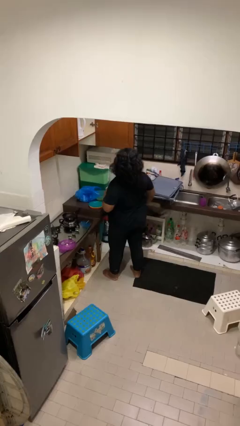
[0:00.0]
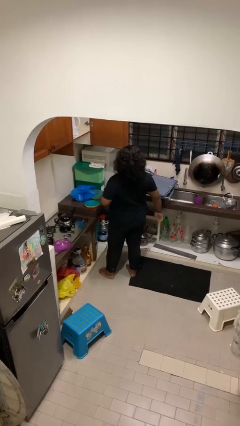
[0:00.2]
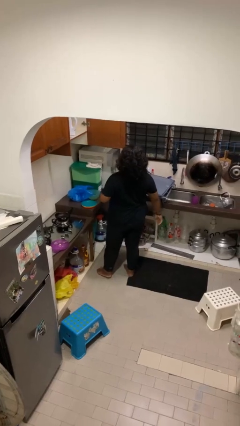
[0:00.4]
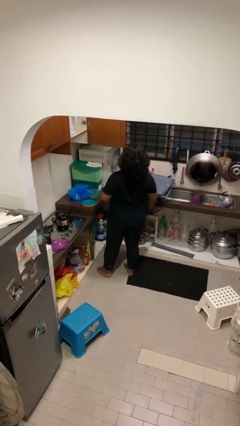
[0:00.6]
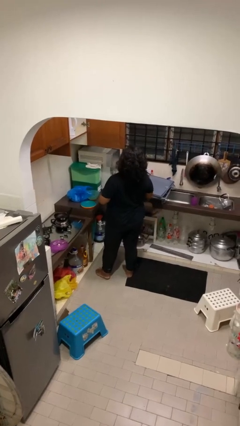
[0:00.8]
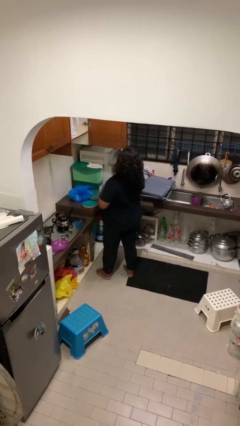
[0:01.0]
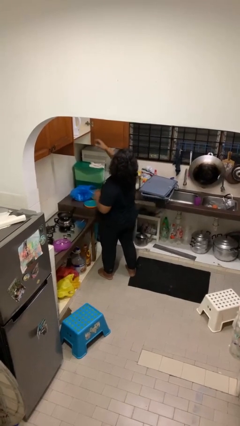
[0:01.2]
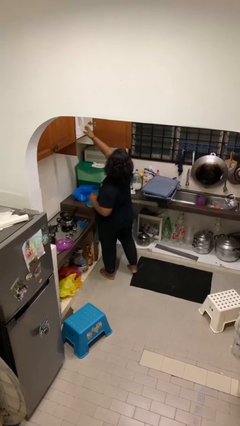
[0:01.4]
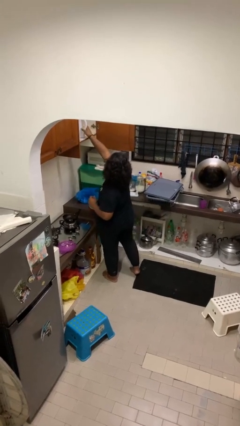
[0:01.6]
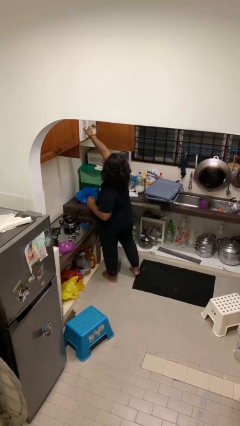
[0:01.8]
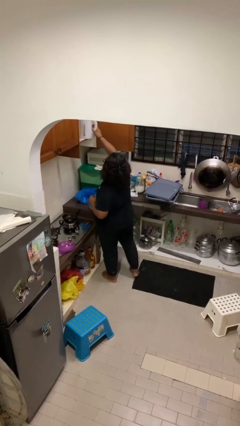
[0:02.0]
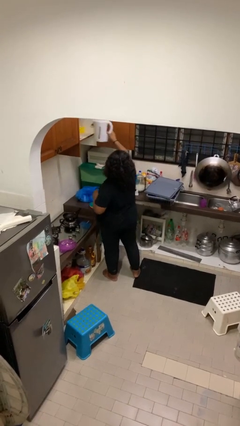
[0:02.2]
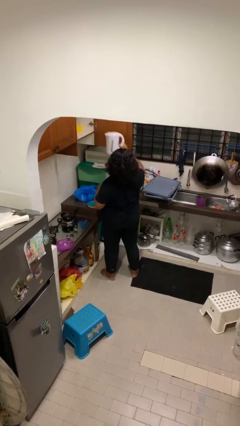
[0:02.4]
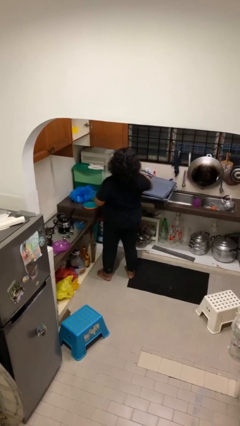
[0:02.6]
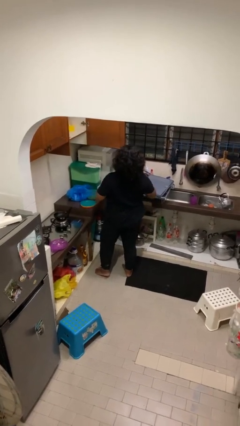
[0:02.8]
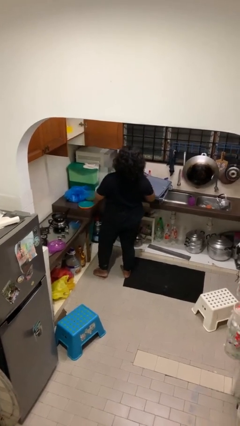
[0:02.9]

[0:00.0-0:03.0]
person takes object from cabinet

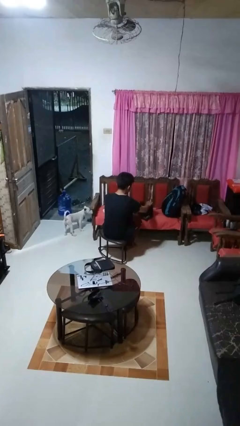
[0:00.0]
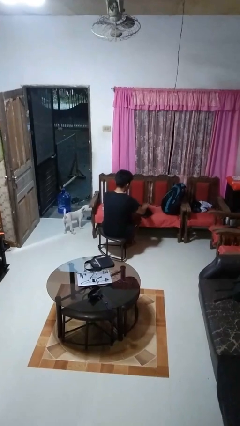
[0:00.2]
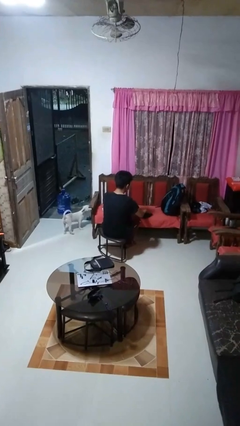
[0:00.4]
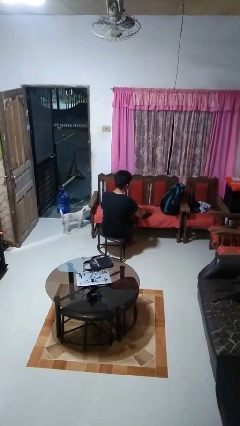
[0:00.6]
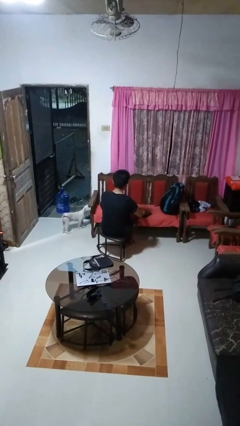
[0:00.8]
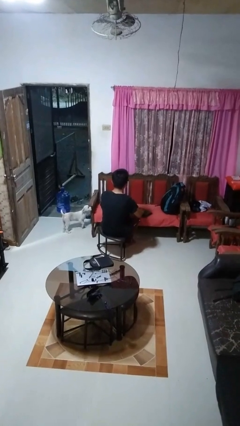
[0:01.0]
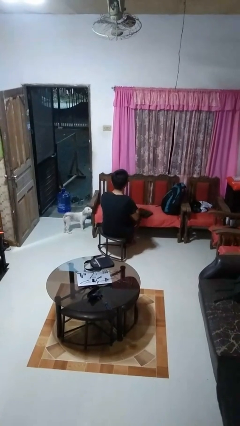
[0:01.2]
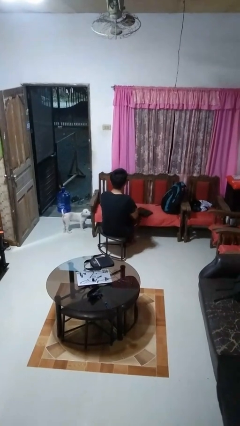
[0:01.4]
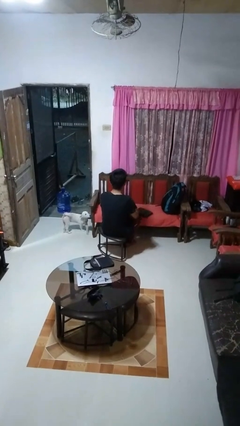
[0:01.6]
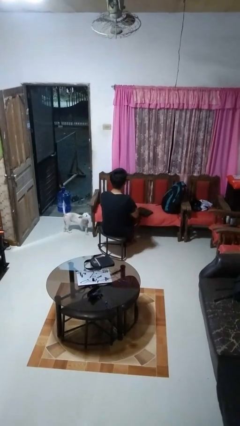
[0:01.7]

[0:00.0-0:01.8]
person closes laptop

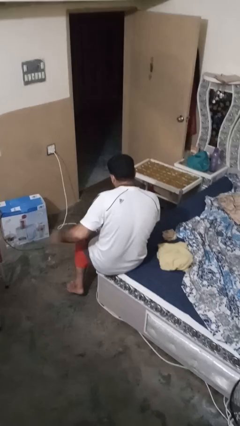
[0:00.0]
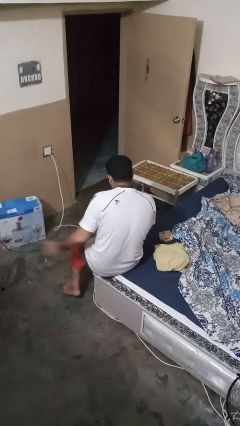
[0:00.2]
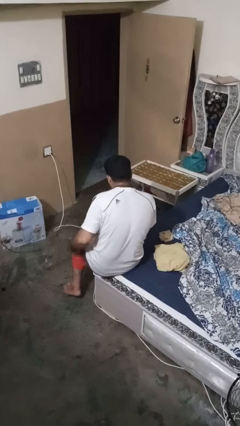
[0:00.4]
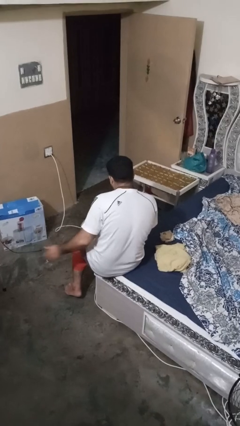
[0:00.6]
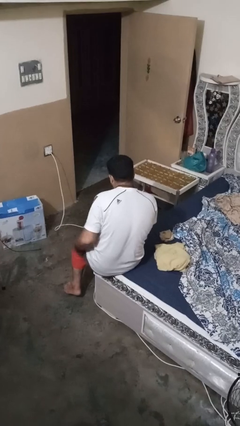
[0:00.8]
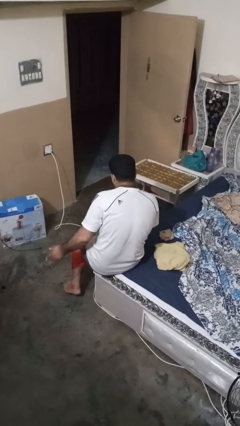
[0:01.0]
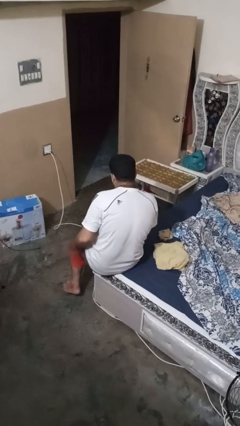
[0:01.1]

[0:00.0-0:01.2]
person slaps hands on thighs

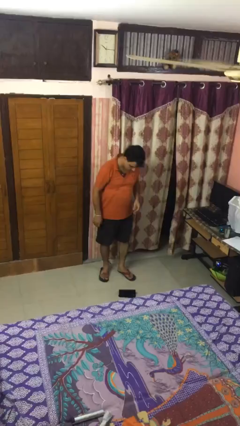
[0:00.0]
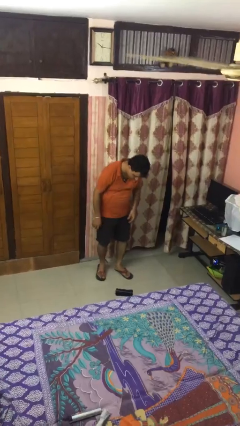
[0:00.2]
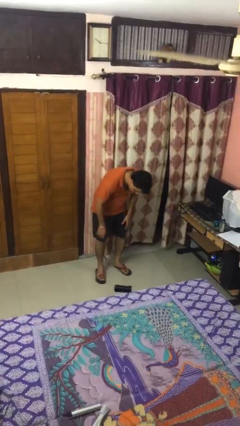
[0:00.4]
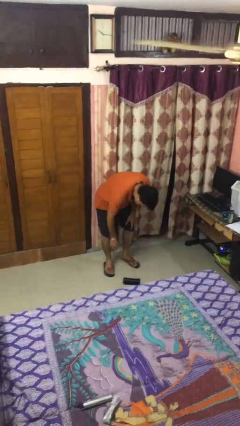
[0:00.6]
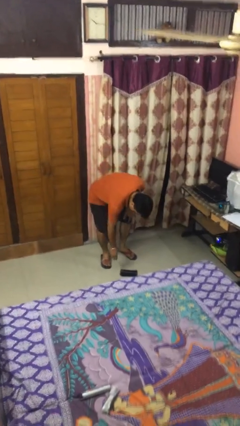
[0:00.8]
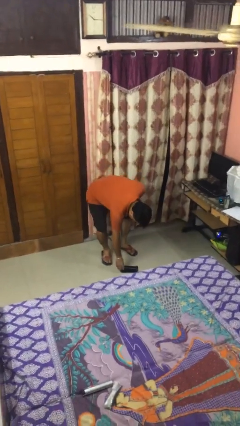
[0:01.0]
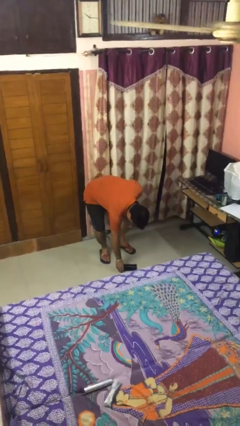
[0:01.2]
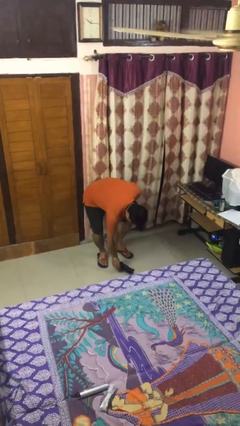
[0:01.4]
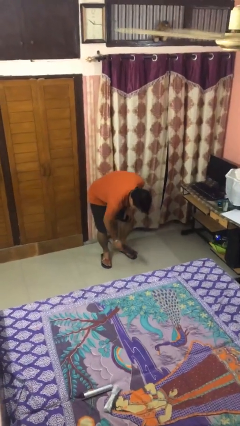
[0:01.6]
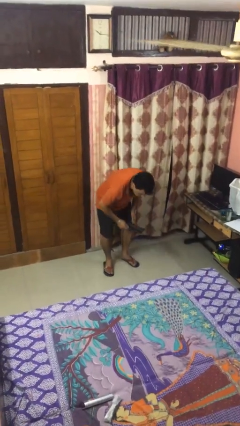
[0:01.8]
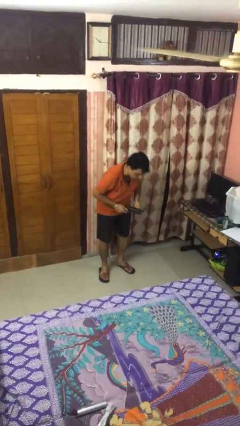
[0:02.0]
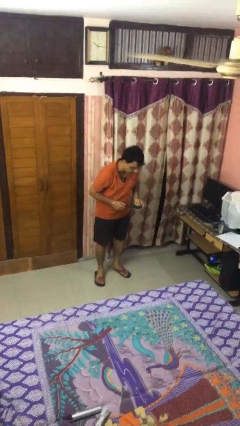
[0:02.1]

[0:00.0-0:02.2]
person picks up object from floor

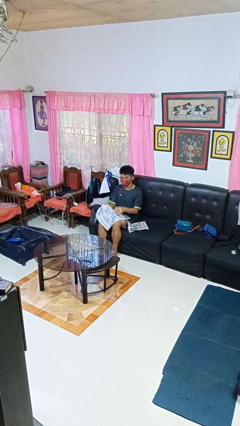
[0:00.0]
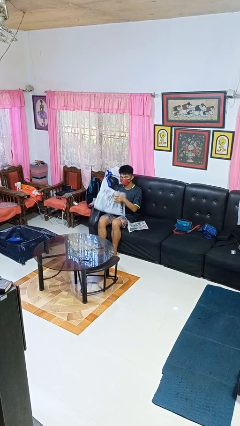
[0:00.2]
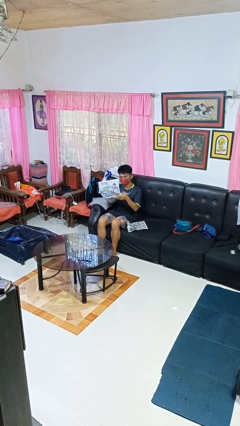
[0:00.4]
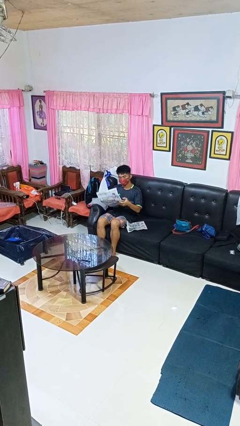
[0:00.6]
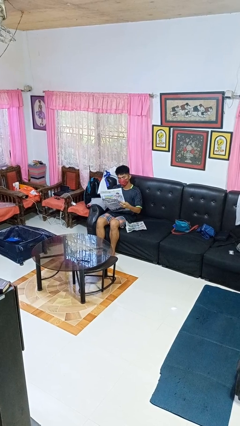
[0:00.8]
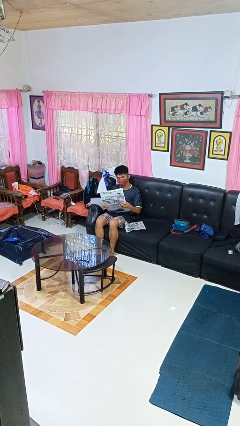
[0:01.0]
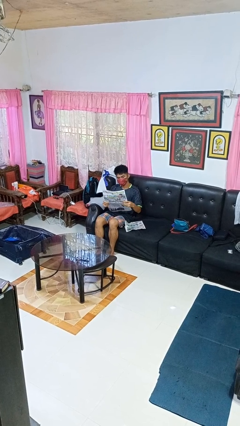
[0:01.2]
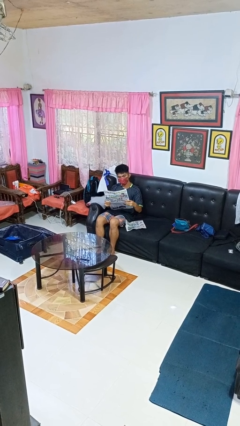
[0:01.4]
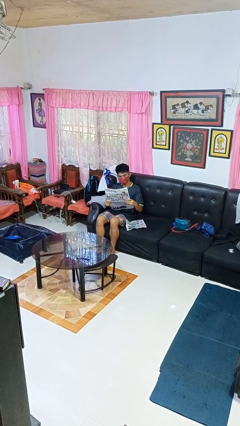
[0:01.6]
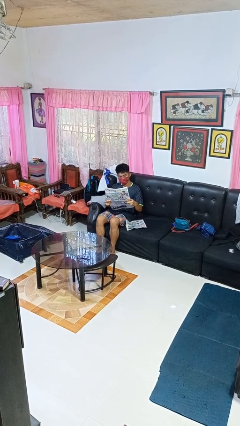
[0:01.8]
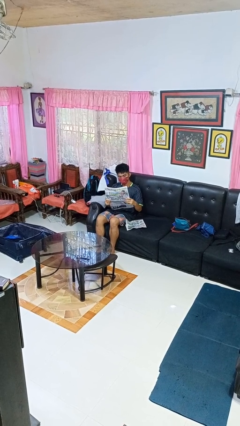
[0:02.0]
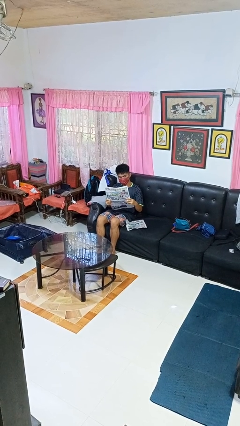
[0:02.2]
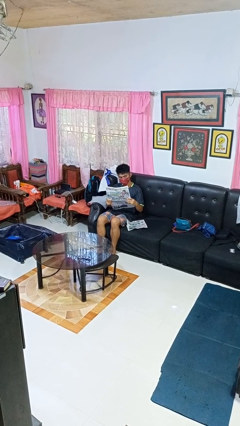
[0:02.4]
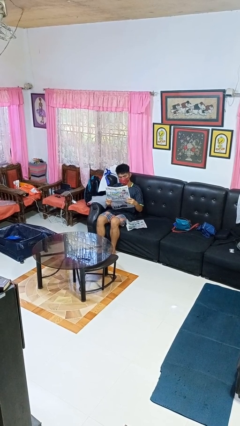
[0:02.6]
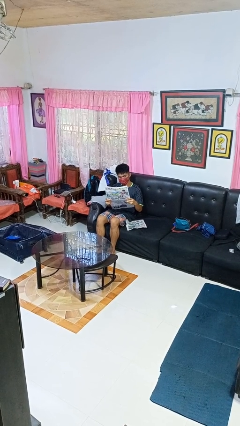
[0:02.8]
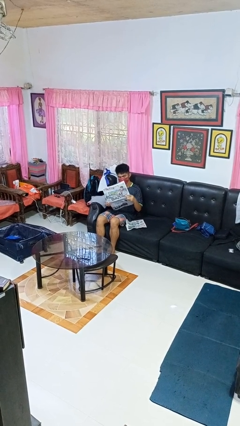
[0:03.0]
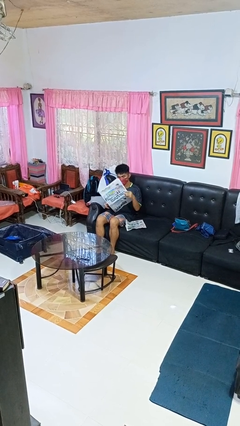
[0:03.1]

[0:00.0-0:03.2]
person reads newspaper

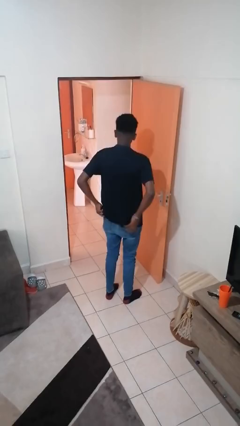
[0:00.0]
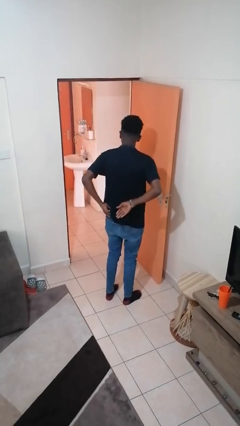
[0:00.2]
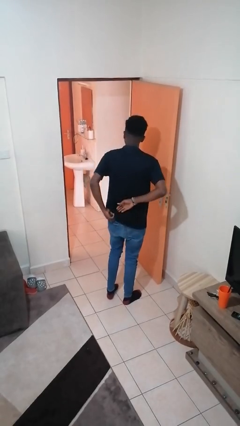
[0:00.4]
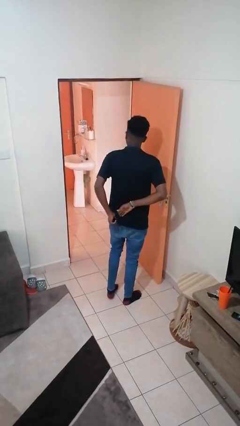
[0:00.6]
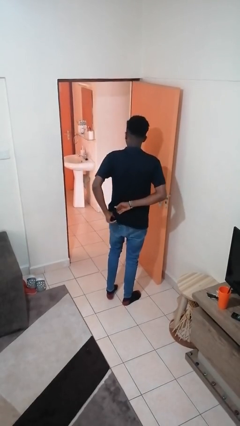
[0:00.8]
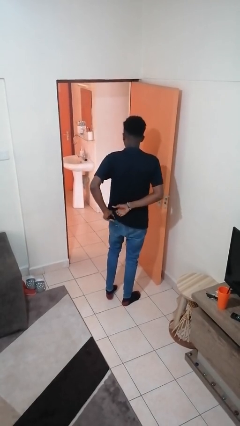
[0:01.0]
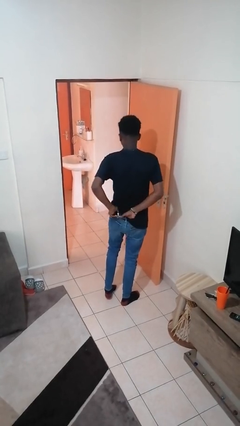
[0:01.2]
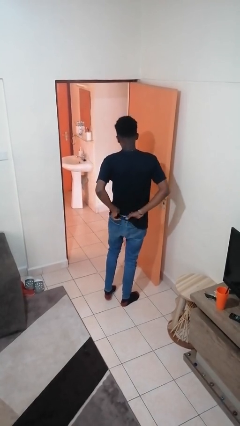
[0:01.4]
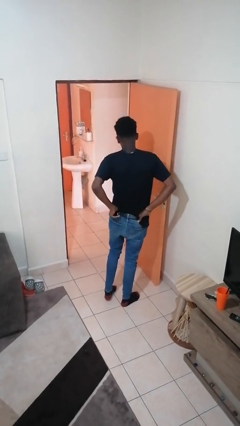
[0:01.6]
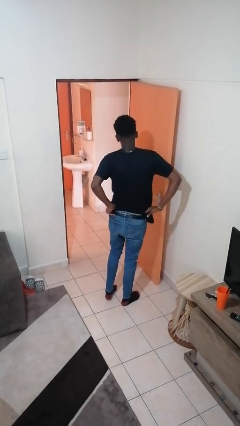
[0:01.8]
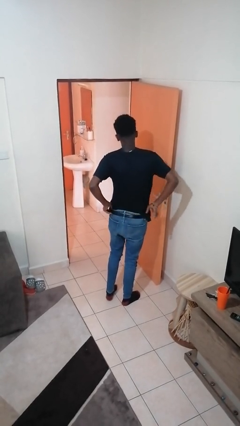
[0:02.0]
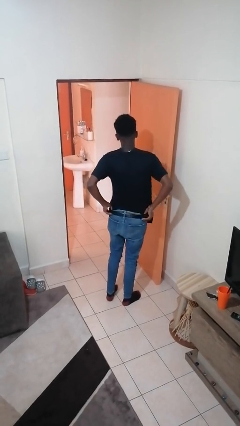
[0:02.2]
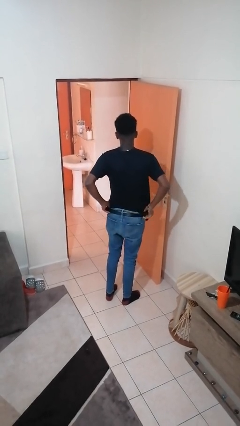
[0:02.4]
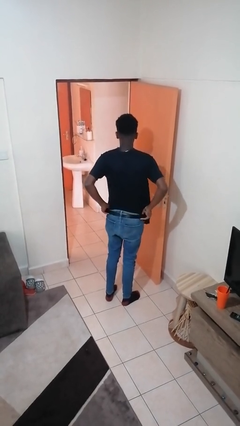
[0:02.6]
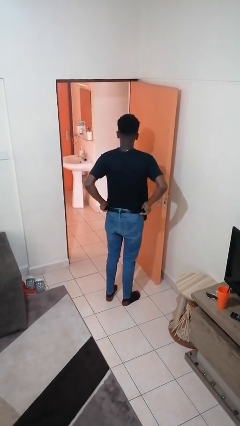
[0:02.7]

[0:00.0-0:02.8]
person tucks in shirt

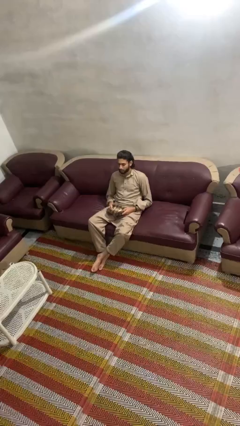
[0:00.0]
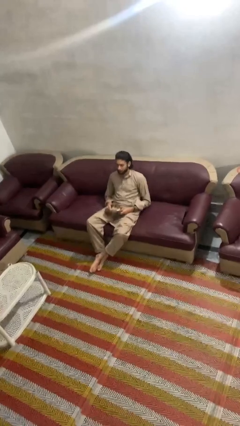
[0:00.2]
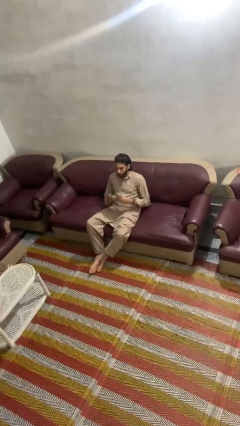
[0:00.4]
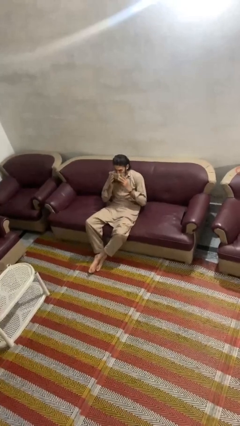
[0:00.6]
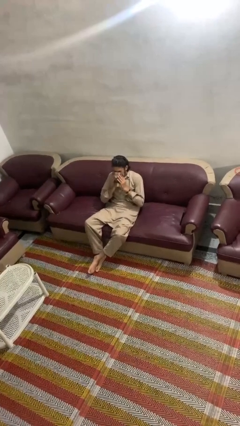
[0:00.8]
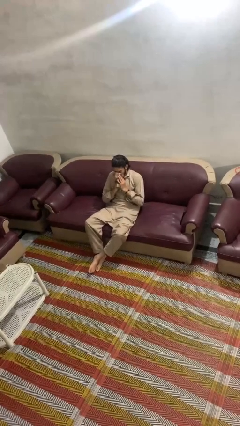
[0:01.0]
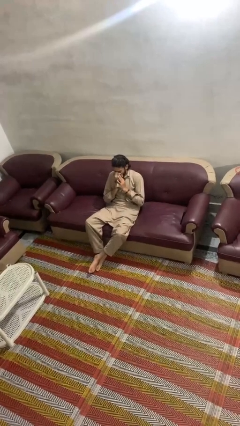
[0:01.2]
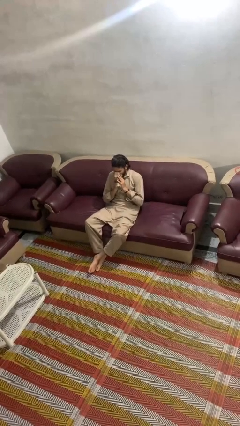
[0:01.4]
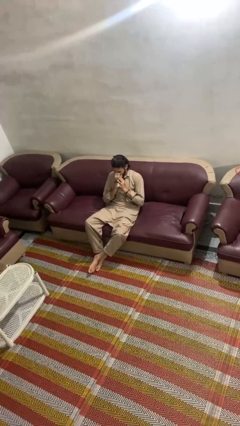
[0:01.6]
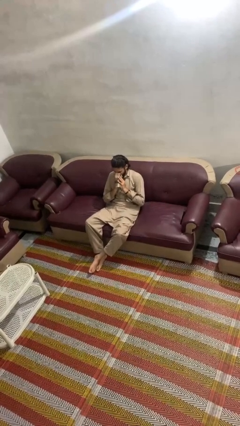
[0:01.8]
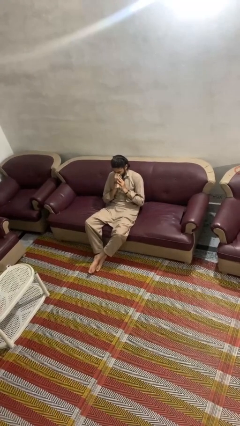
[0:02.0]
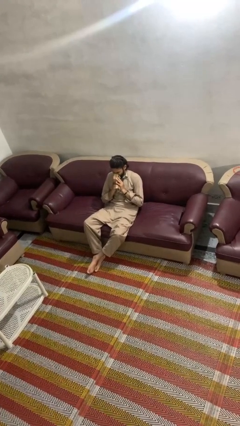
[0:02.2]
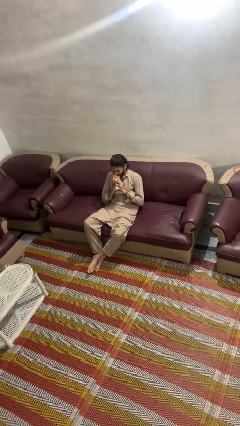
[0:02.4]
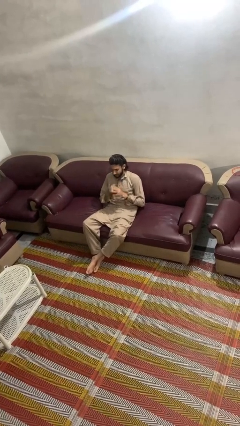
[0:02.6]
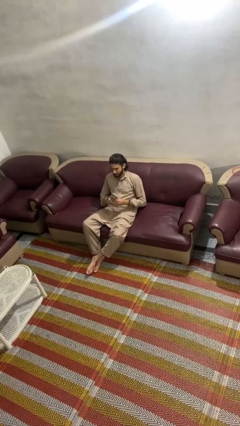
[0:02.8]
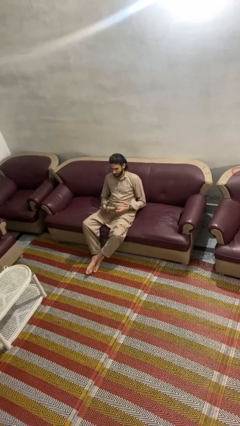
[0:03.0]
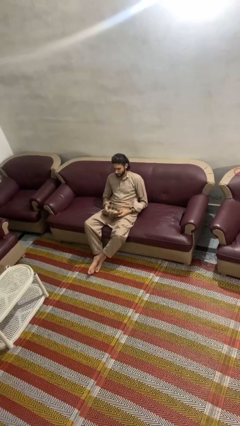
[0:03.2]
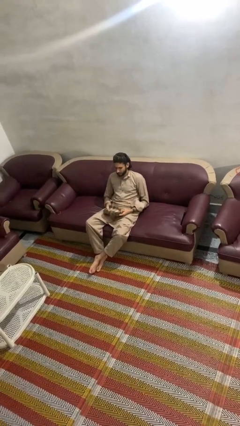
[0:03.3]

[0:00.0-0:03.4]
person blows nose
